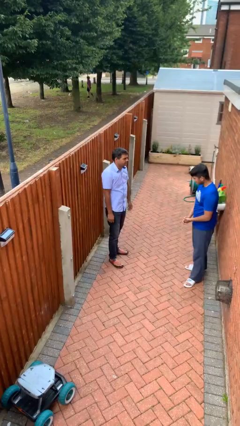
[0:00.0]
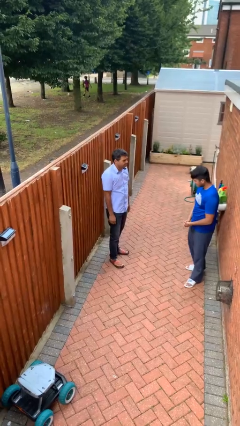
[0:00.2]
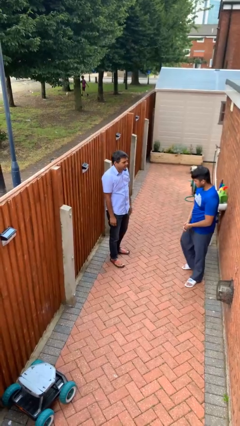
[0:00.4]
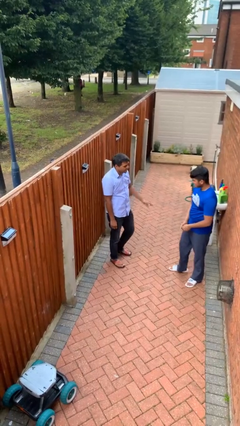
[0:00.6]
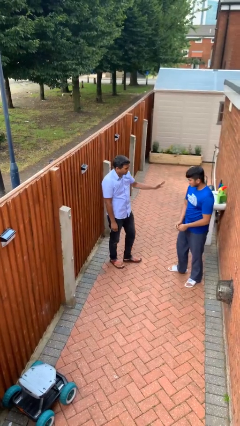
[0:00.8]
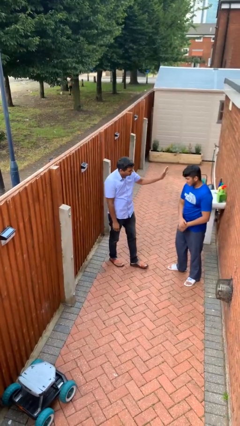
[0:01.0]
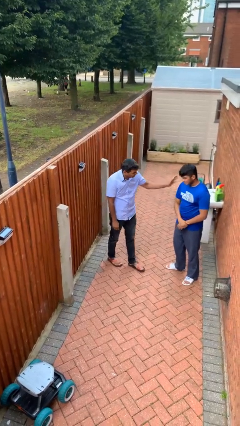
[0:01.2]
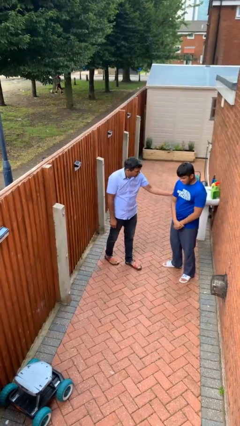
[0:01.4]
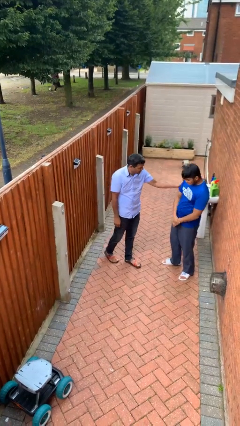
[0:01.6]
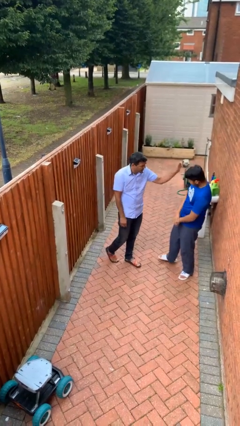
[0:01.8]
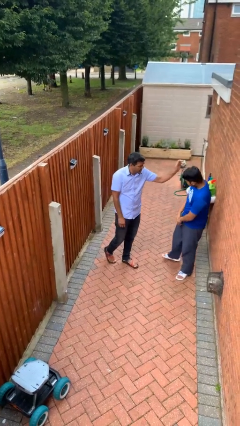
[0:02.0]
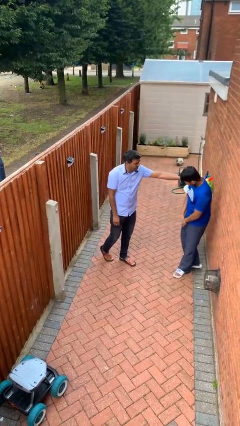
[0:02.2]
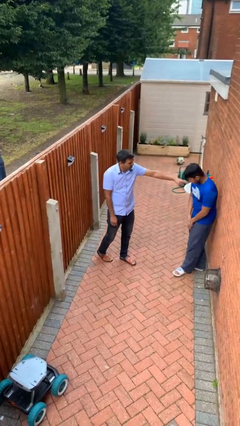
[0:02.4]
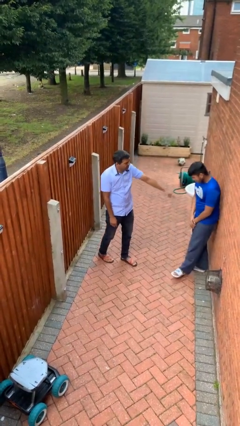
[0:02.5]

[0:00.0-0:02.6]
person shoves person

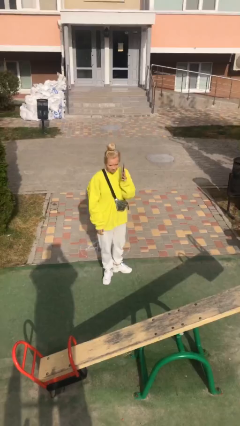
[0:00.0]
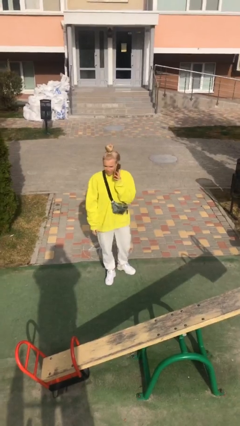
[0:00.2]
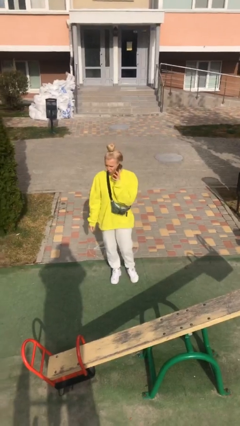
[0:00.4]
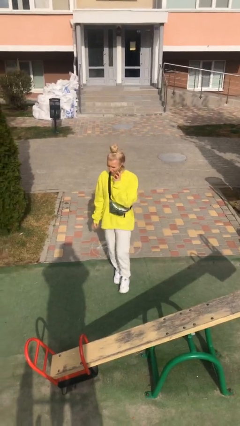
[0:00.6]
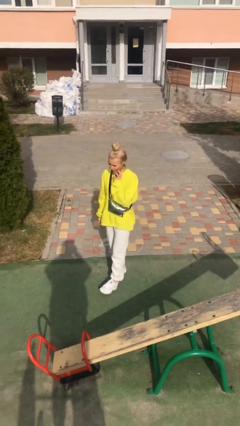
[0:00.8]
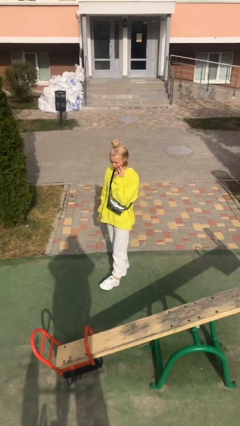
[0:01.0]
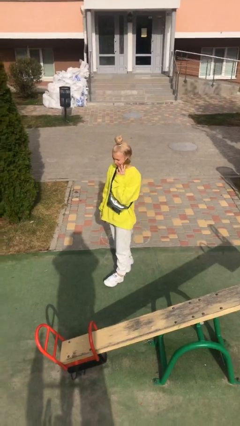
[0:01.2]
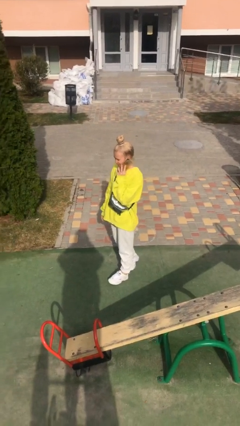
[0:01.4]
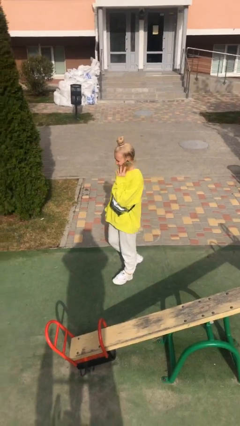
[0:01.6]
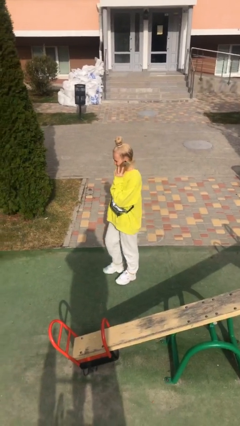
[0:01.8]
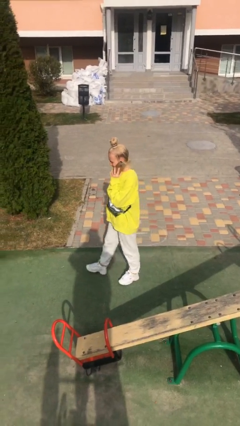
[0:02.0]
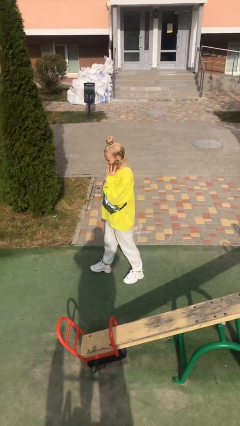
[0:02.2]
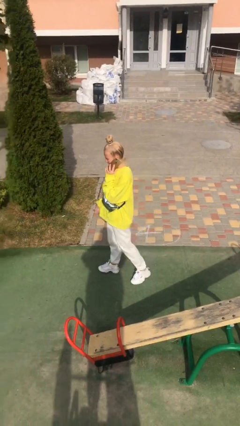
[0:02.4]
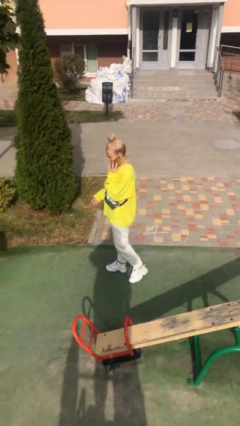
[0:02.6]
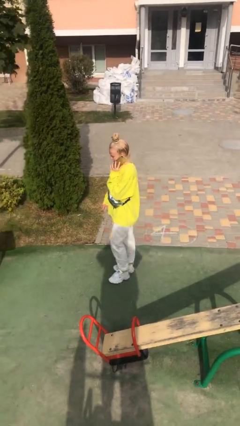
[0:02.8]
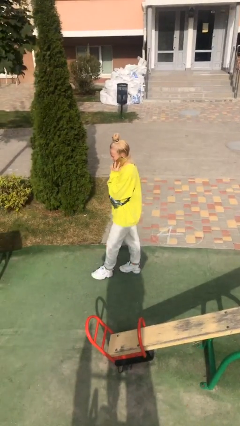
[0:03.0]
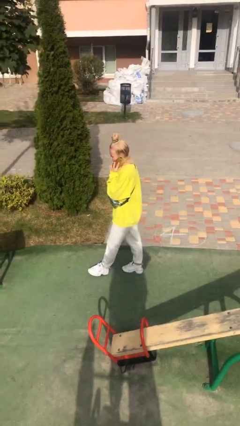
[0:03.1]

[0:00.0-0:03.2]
person talks on phone

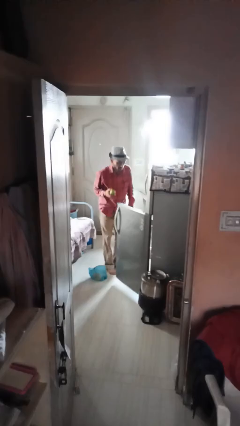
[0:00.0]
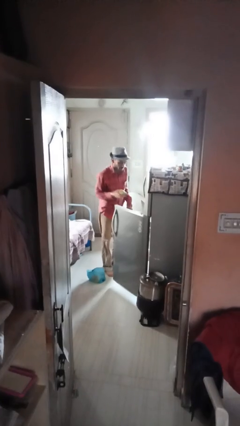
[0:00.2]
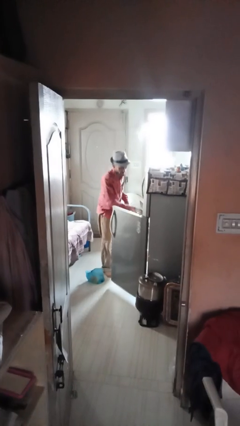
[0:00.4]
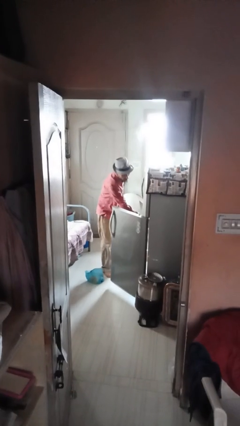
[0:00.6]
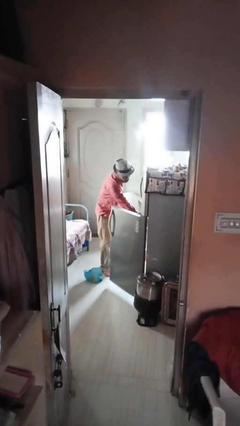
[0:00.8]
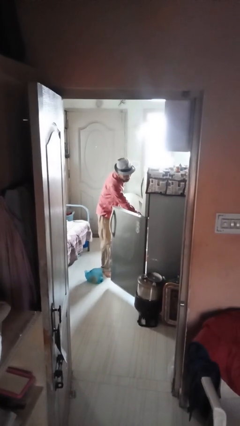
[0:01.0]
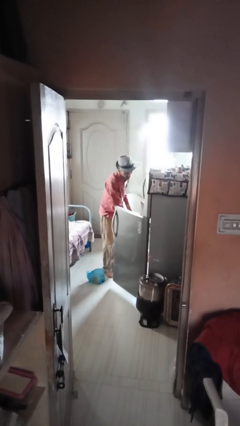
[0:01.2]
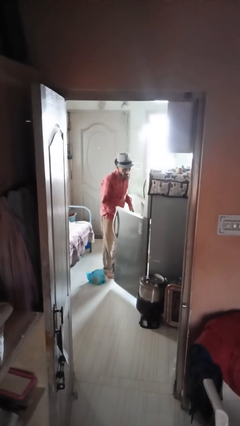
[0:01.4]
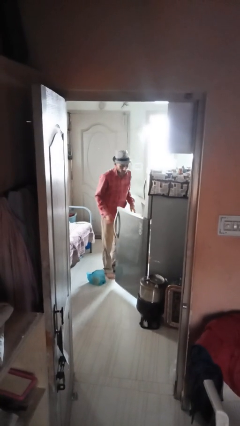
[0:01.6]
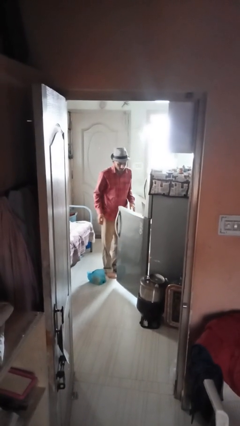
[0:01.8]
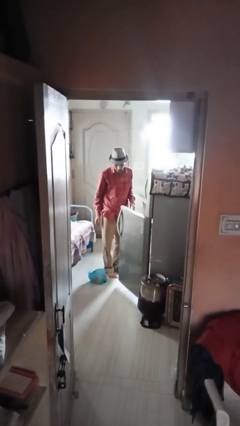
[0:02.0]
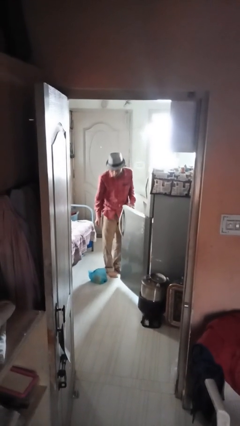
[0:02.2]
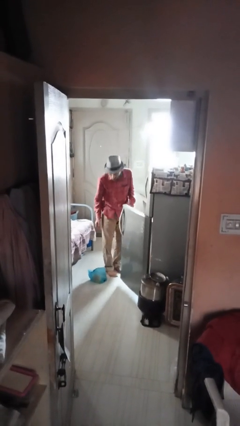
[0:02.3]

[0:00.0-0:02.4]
person loads groceries into refrigerator

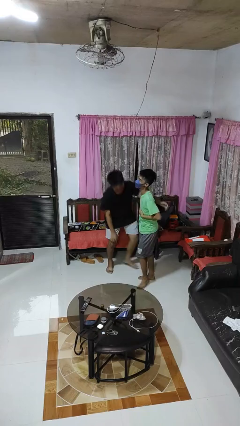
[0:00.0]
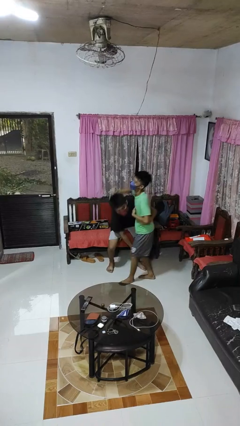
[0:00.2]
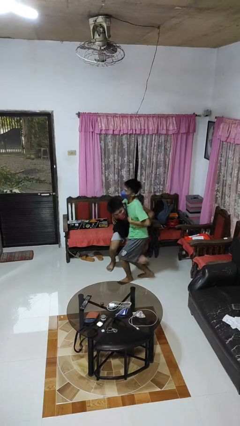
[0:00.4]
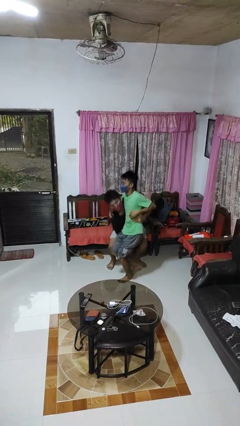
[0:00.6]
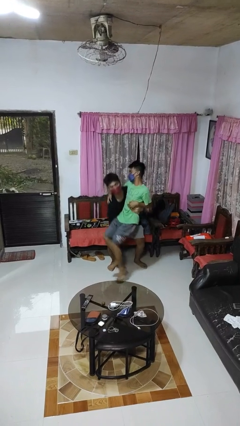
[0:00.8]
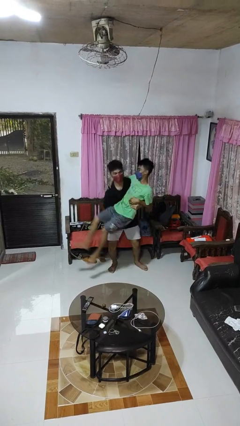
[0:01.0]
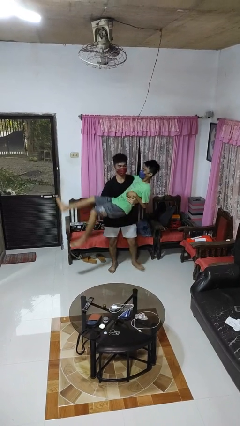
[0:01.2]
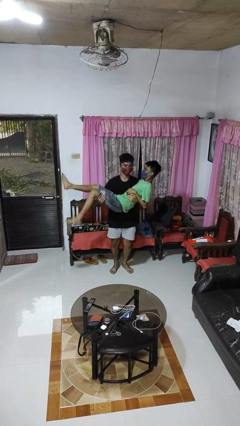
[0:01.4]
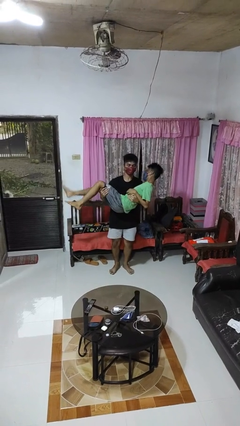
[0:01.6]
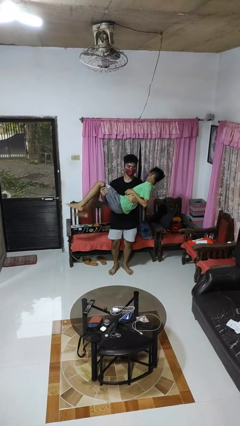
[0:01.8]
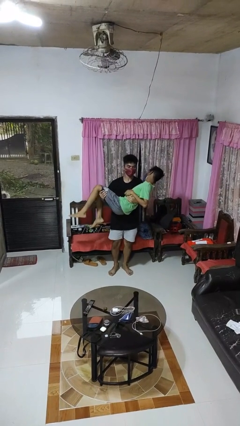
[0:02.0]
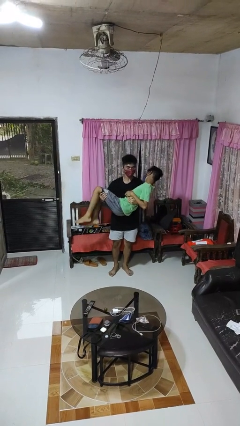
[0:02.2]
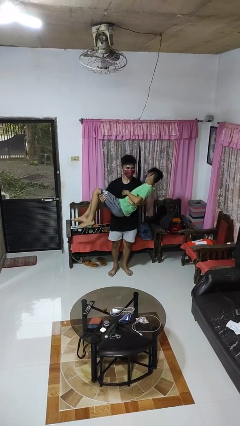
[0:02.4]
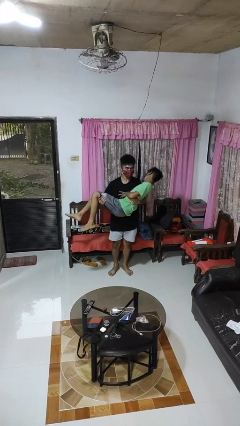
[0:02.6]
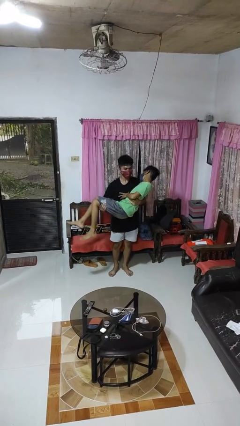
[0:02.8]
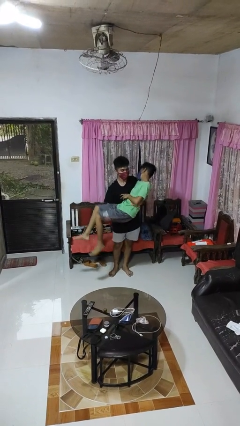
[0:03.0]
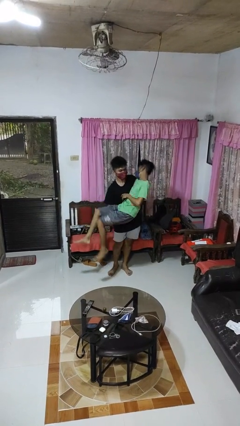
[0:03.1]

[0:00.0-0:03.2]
person picks up person

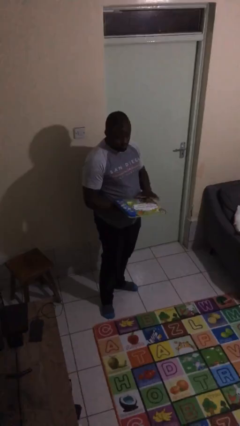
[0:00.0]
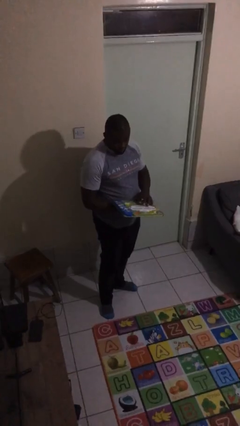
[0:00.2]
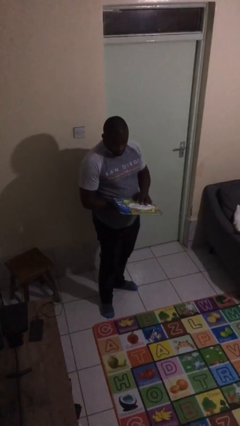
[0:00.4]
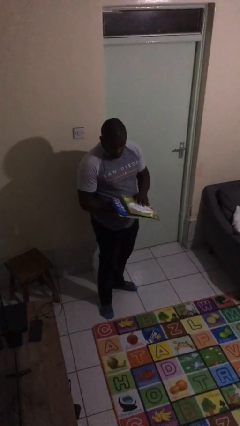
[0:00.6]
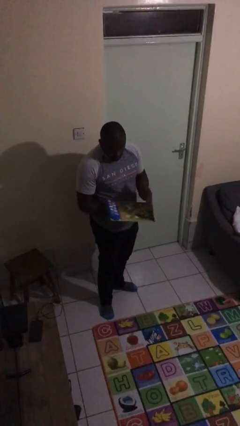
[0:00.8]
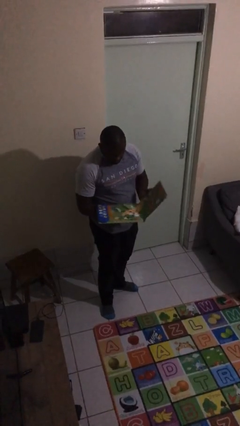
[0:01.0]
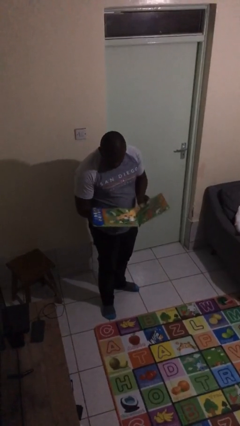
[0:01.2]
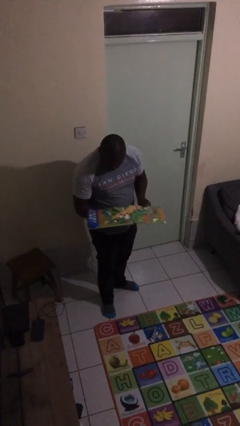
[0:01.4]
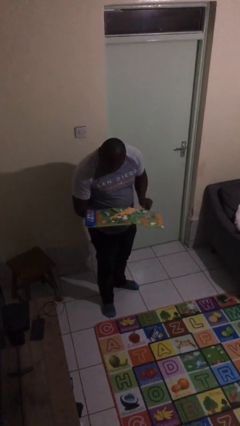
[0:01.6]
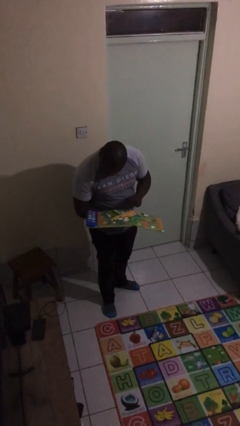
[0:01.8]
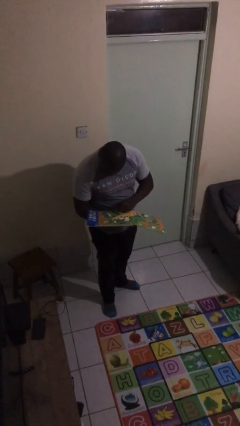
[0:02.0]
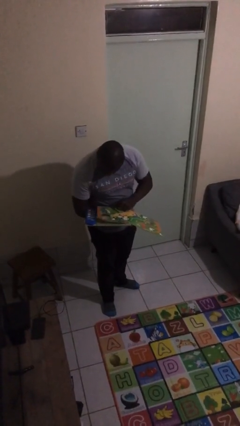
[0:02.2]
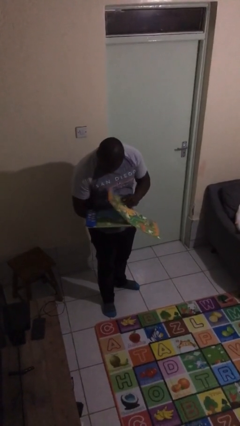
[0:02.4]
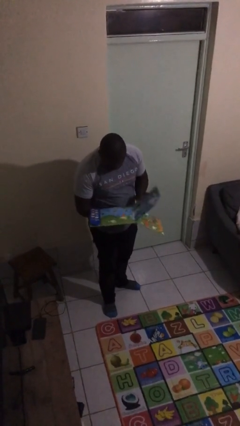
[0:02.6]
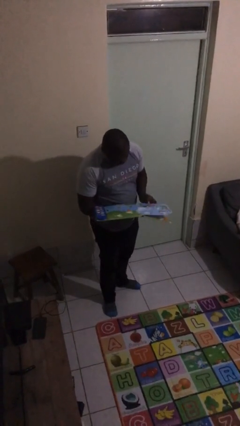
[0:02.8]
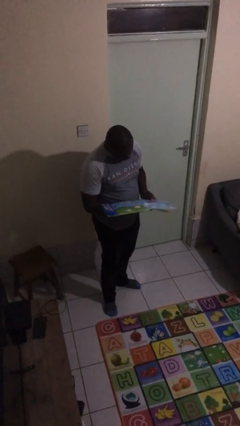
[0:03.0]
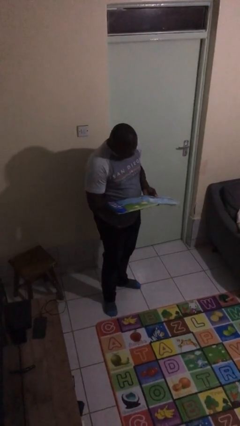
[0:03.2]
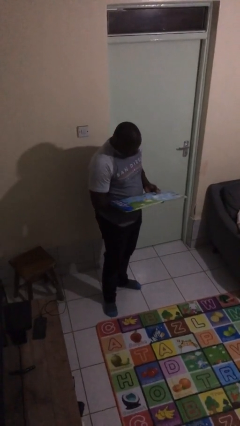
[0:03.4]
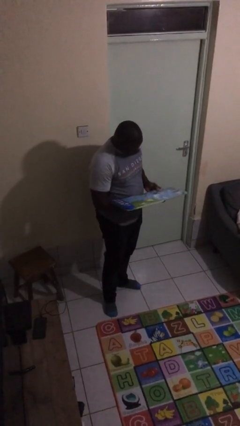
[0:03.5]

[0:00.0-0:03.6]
person reads book

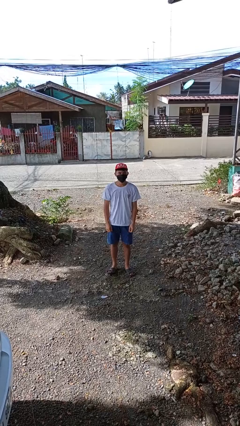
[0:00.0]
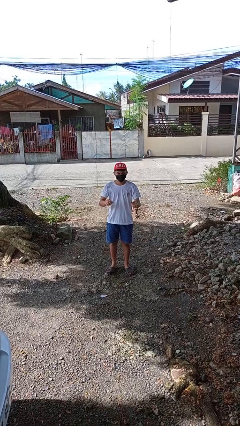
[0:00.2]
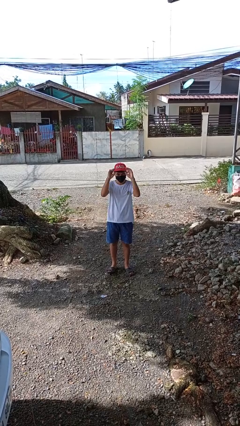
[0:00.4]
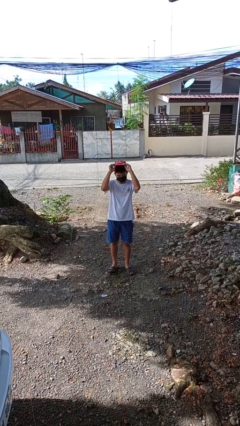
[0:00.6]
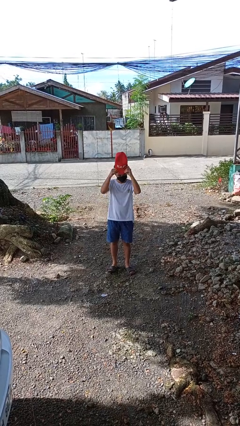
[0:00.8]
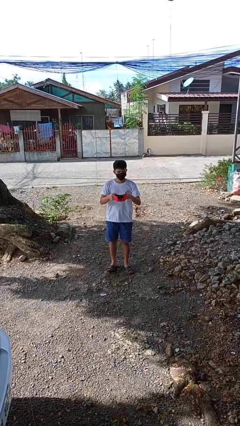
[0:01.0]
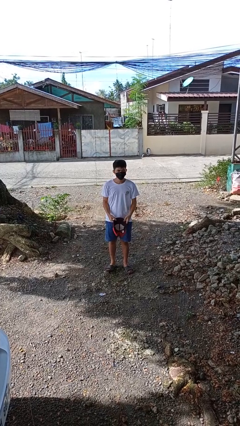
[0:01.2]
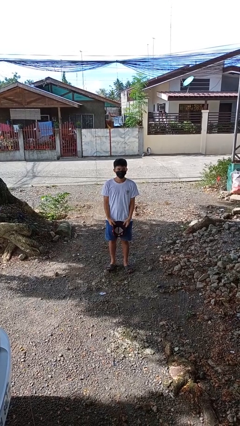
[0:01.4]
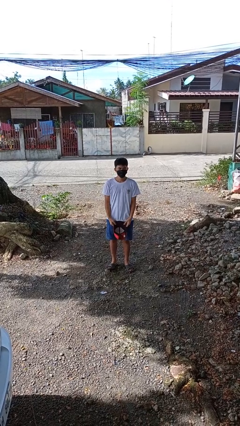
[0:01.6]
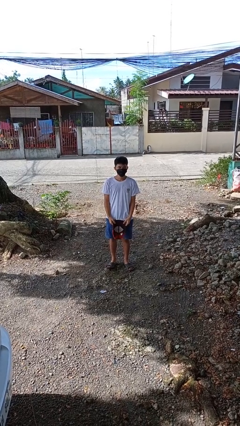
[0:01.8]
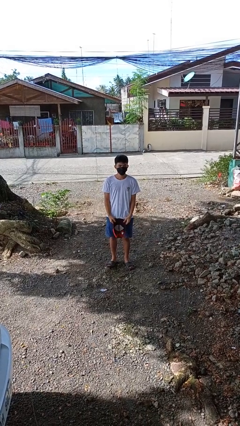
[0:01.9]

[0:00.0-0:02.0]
person takes off hat

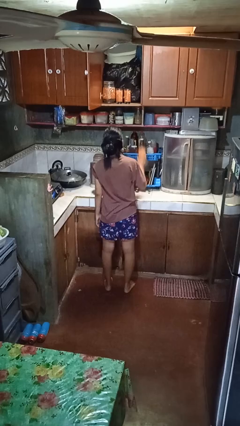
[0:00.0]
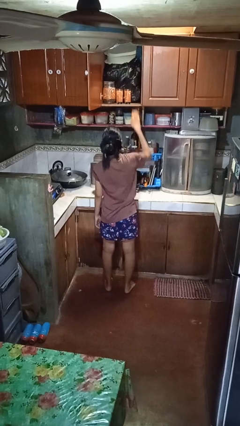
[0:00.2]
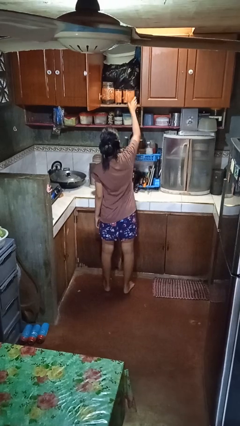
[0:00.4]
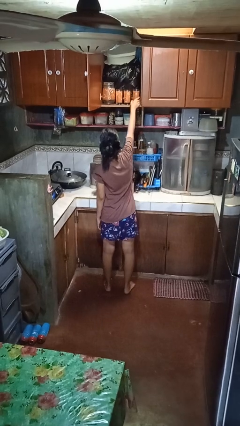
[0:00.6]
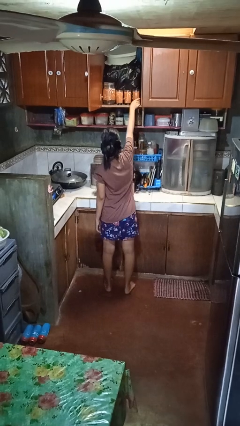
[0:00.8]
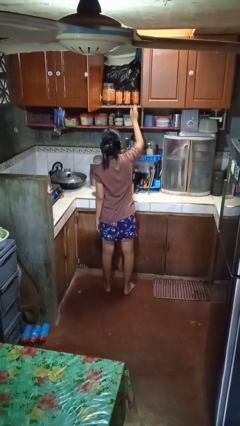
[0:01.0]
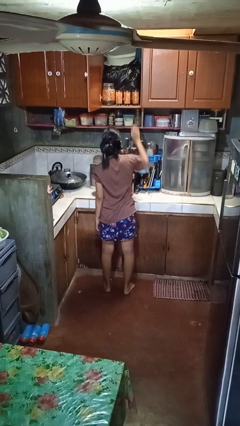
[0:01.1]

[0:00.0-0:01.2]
person puts object in cabinet
